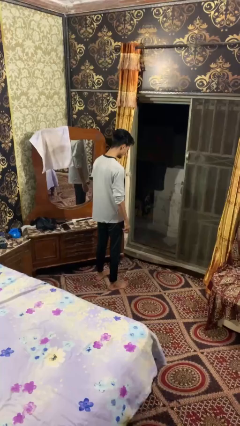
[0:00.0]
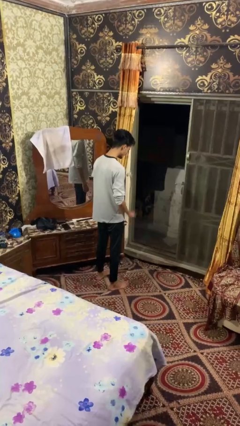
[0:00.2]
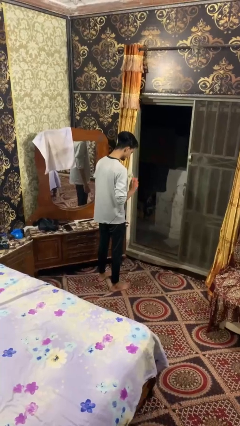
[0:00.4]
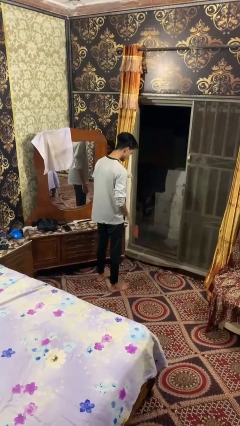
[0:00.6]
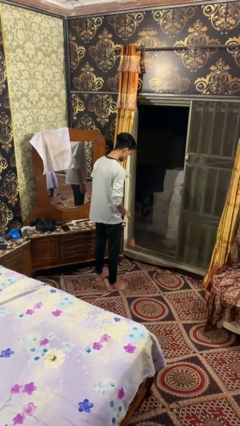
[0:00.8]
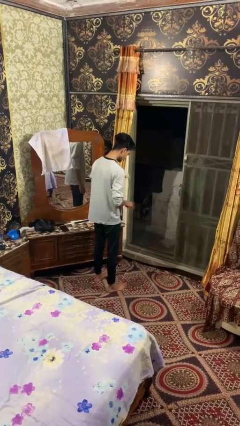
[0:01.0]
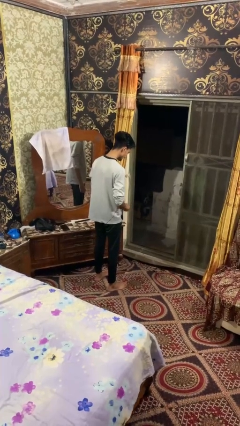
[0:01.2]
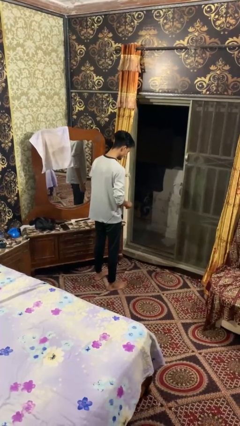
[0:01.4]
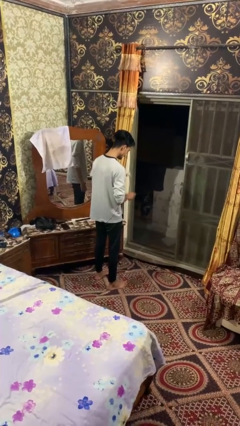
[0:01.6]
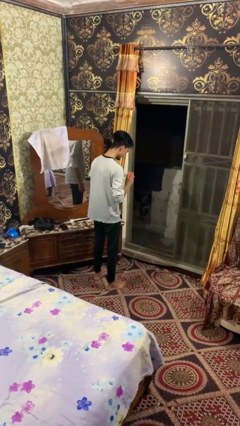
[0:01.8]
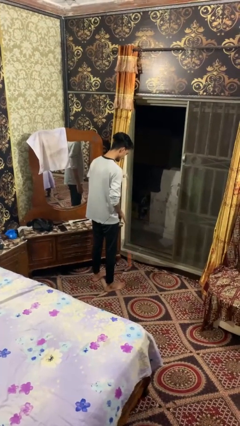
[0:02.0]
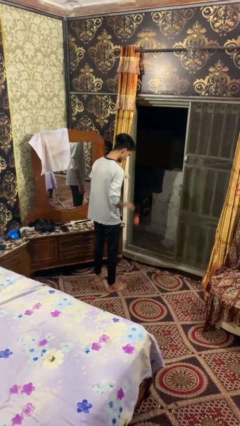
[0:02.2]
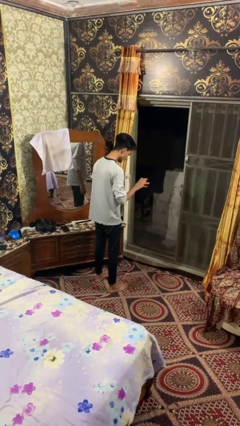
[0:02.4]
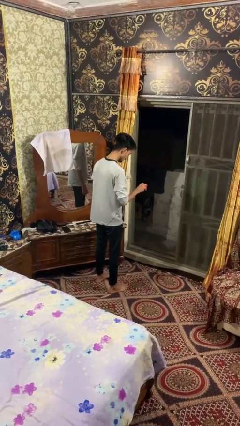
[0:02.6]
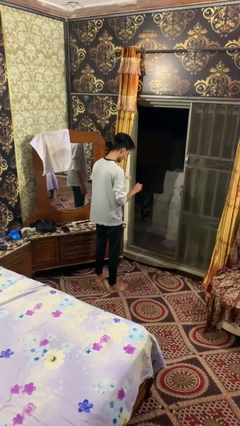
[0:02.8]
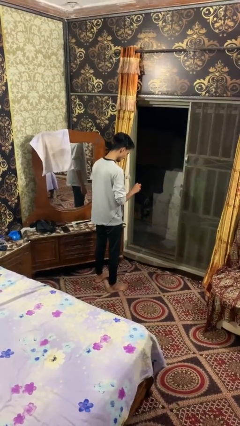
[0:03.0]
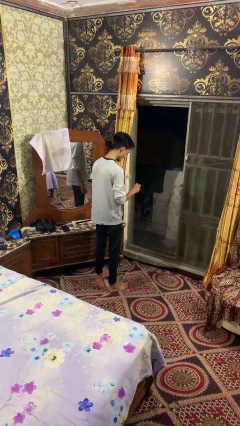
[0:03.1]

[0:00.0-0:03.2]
person bounces ball on floor

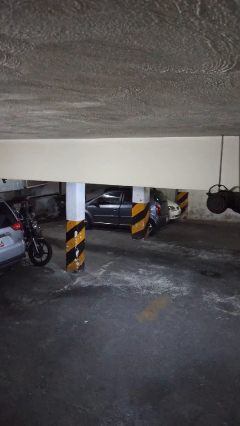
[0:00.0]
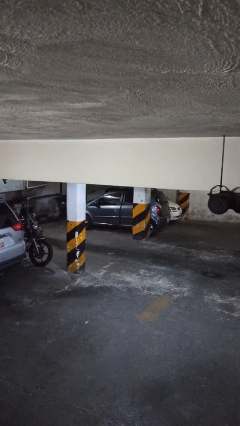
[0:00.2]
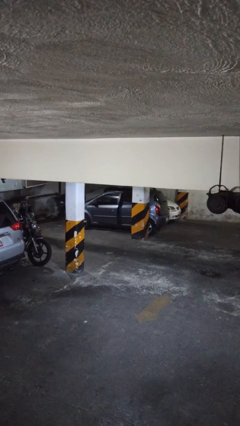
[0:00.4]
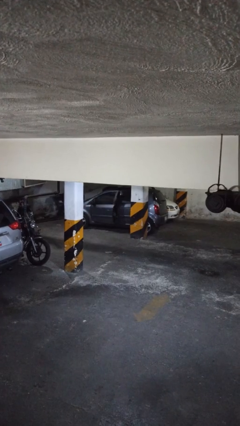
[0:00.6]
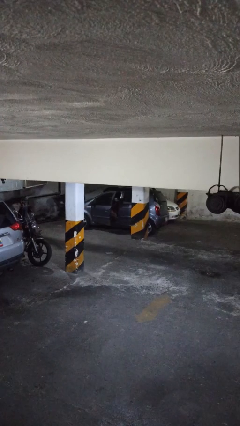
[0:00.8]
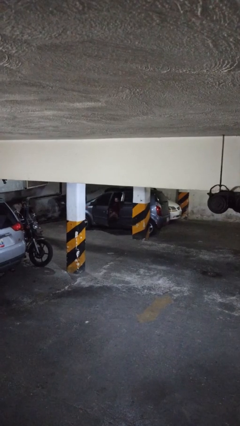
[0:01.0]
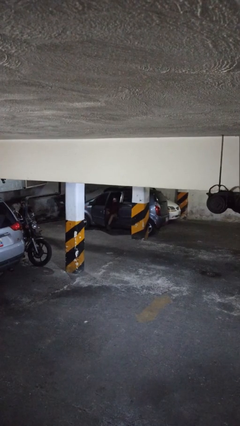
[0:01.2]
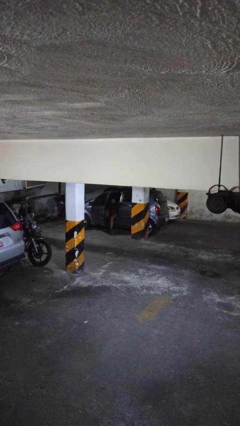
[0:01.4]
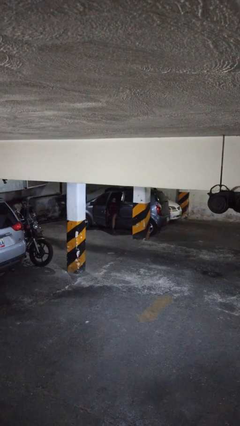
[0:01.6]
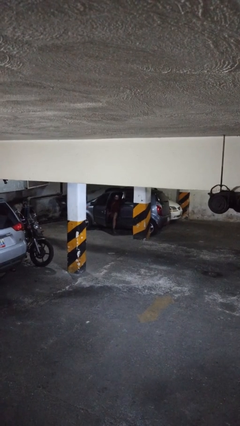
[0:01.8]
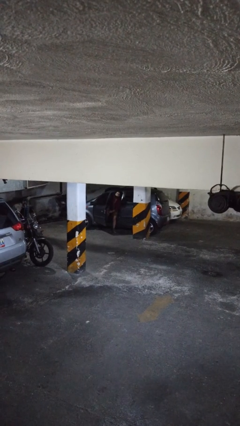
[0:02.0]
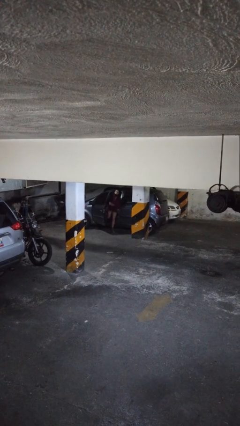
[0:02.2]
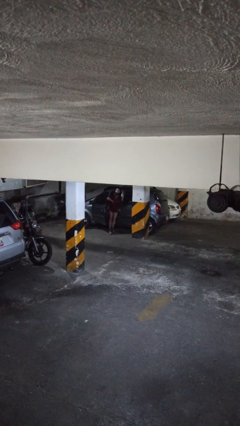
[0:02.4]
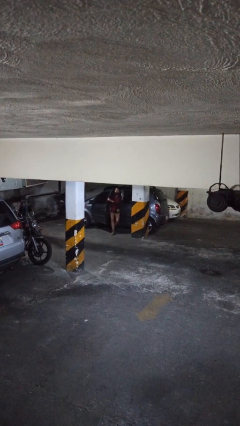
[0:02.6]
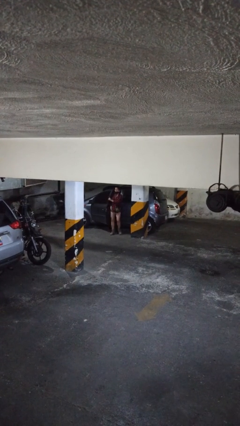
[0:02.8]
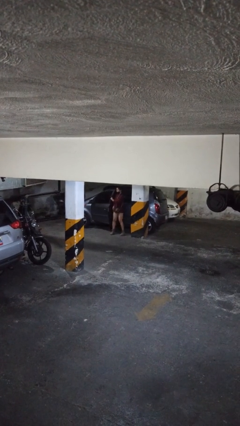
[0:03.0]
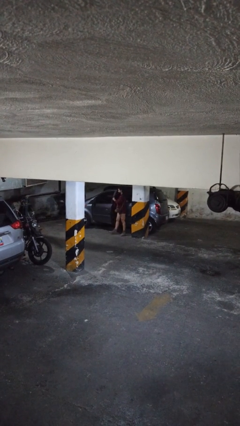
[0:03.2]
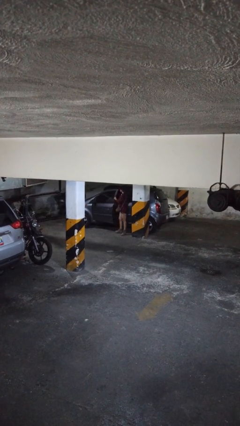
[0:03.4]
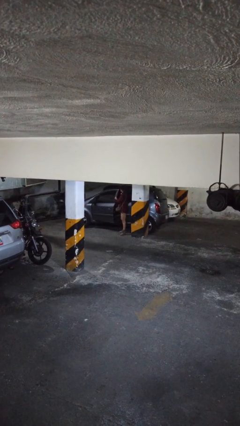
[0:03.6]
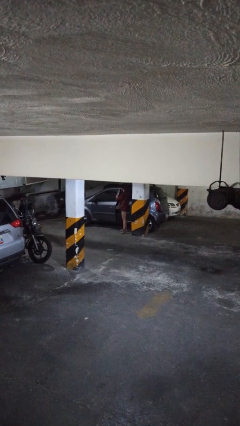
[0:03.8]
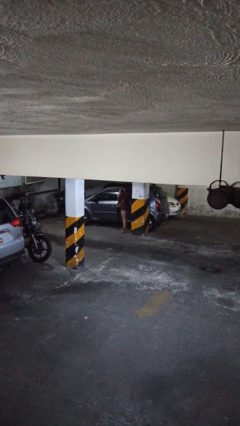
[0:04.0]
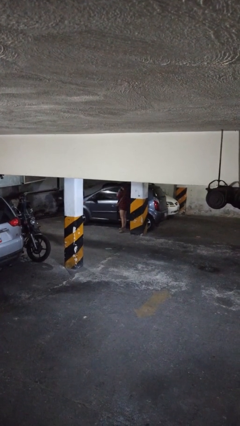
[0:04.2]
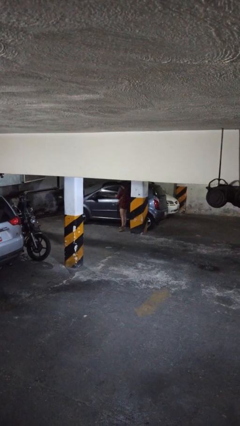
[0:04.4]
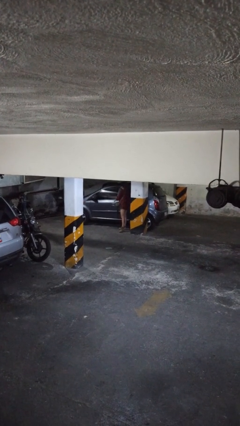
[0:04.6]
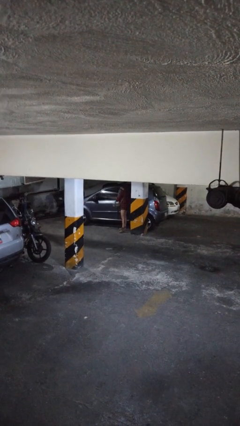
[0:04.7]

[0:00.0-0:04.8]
car drops off person

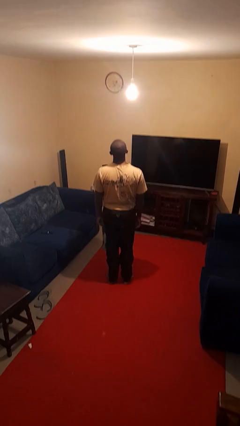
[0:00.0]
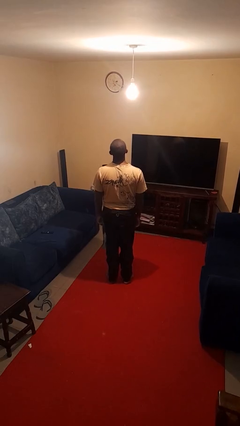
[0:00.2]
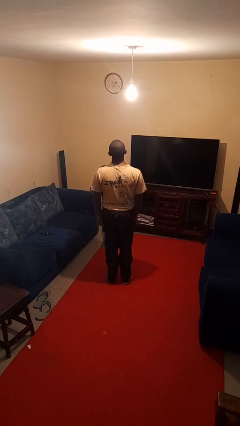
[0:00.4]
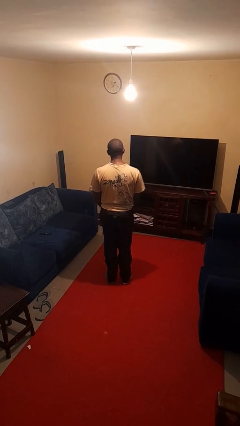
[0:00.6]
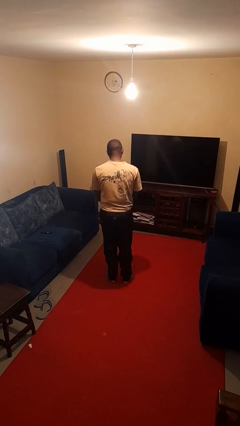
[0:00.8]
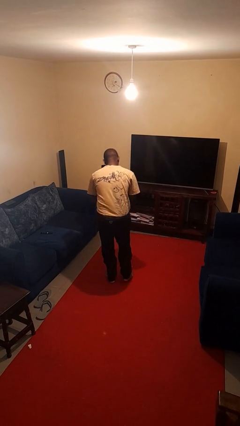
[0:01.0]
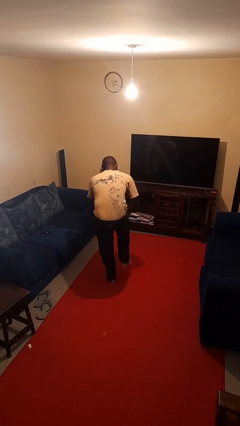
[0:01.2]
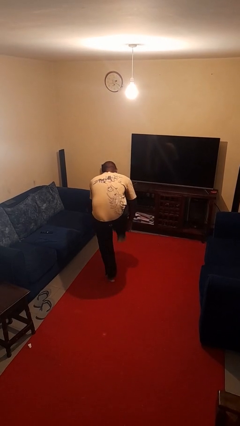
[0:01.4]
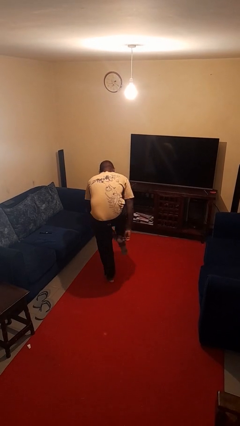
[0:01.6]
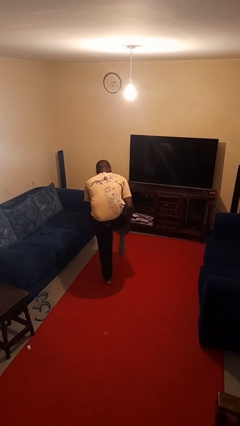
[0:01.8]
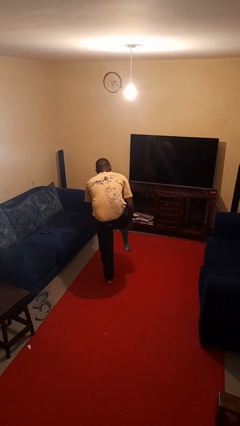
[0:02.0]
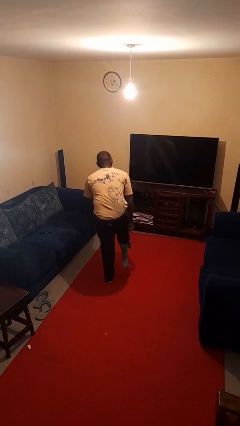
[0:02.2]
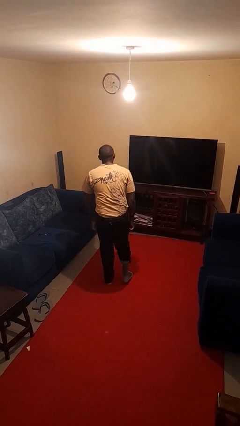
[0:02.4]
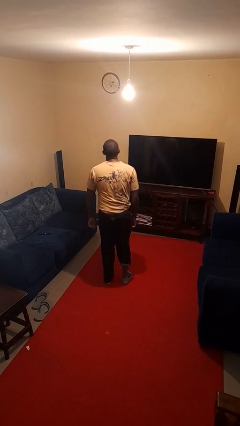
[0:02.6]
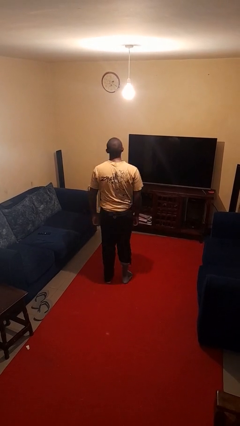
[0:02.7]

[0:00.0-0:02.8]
person puts on socks

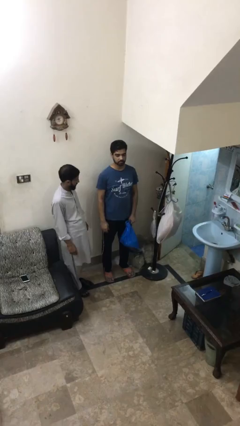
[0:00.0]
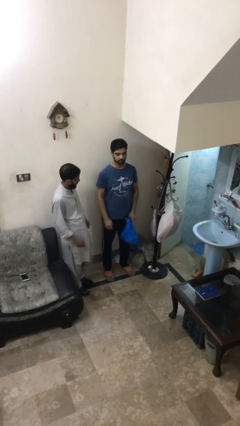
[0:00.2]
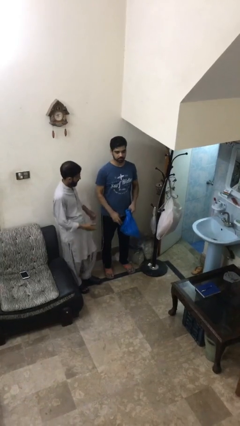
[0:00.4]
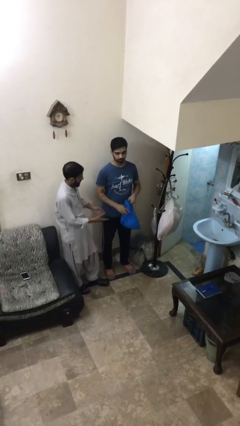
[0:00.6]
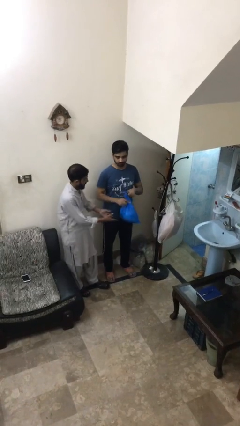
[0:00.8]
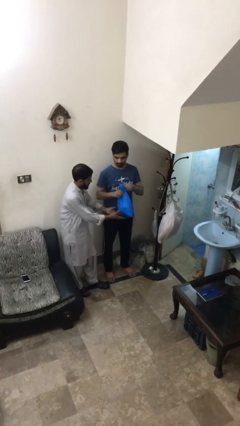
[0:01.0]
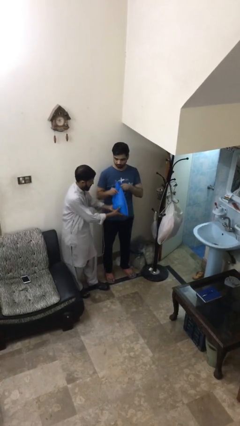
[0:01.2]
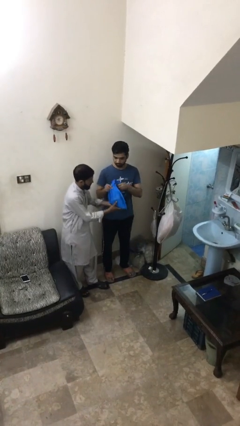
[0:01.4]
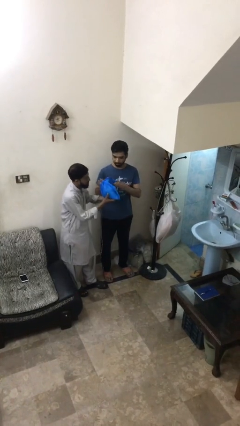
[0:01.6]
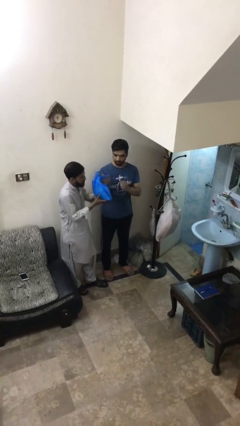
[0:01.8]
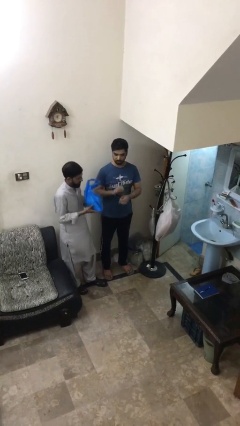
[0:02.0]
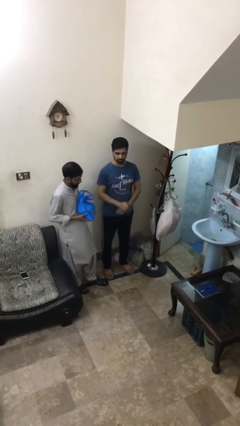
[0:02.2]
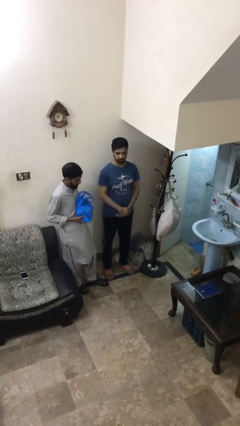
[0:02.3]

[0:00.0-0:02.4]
person transfers object to person

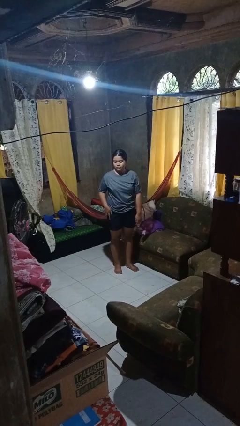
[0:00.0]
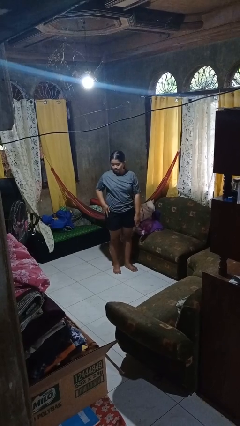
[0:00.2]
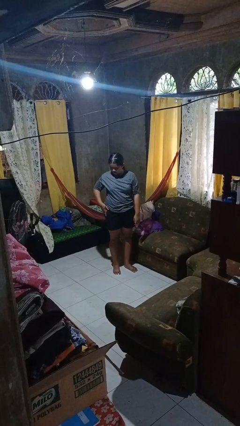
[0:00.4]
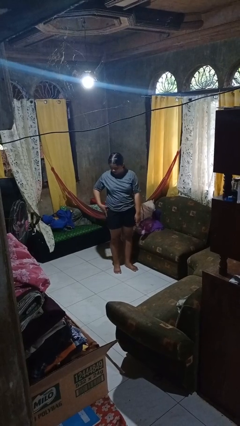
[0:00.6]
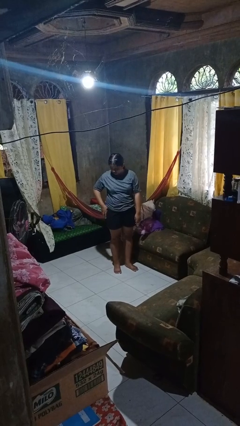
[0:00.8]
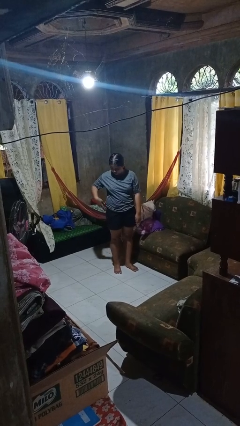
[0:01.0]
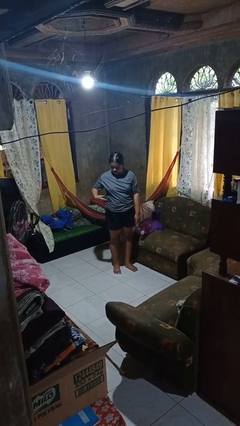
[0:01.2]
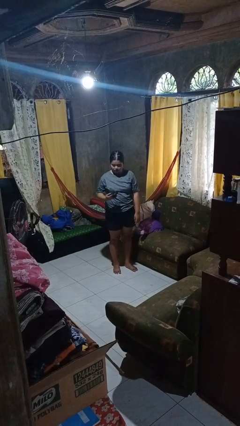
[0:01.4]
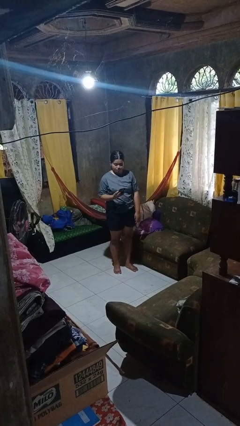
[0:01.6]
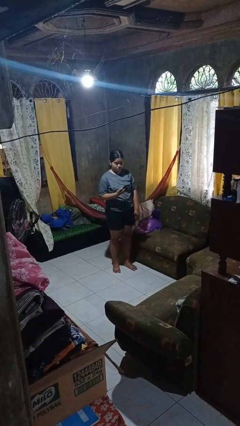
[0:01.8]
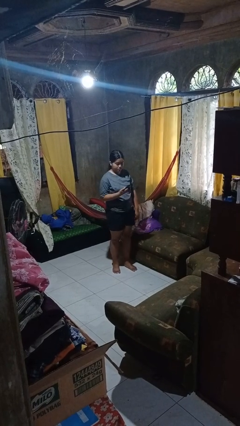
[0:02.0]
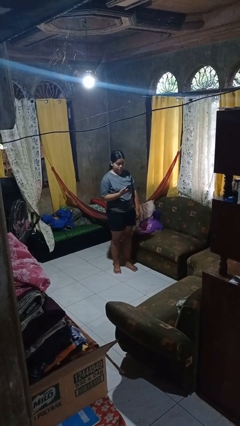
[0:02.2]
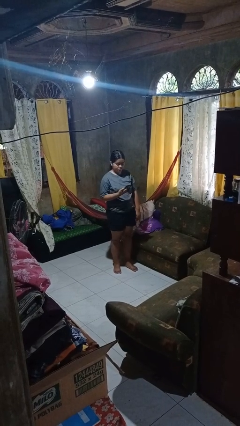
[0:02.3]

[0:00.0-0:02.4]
person takes phone from pocket

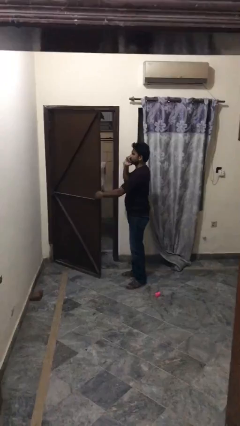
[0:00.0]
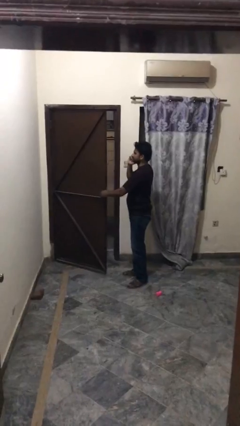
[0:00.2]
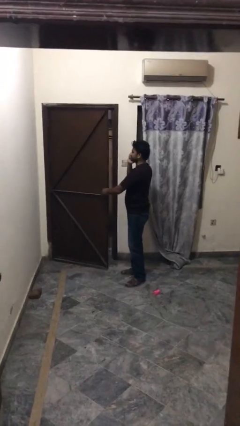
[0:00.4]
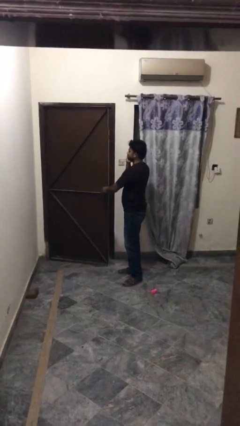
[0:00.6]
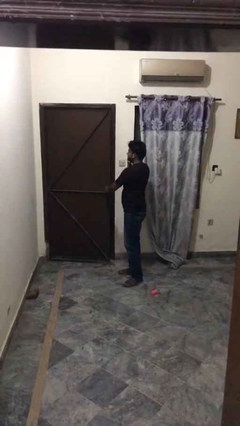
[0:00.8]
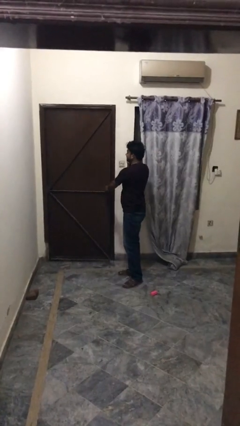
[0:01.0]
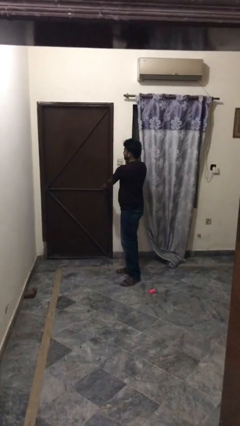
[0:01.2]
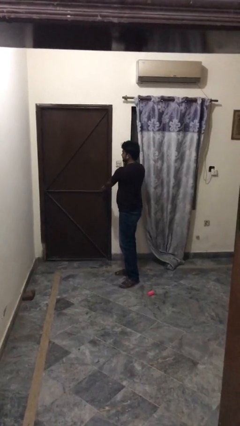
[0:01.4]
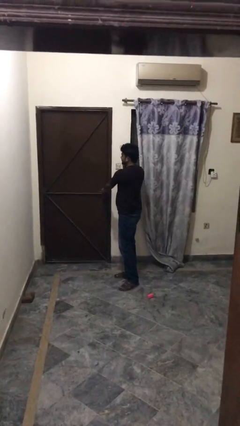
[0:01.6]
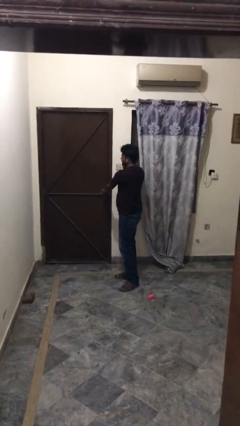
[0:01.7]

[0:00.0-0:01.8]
person closes facility door

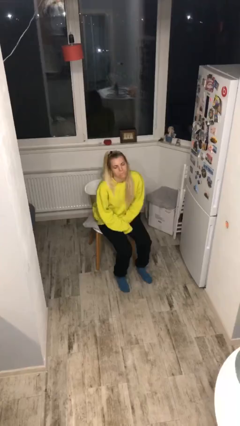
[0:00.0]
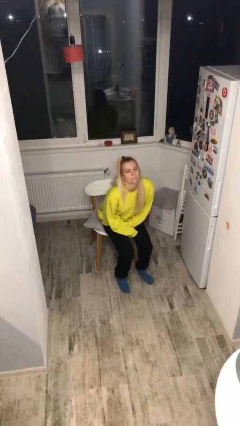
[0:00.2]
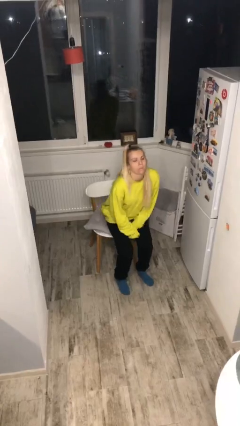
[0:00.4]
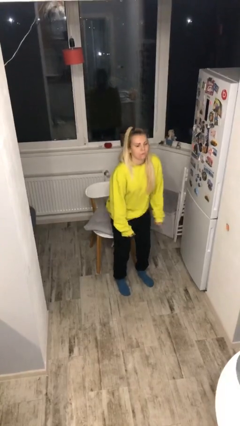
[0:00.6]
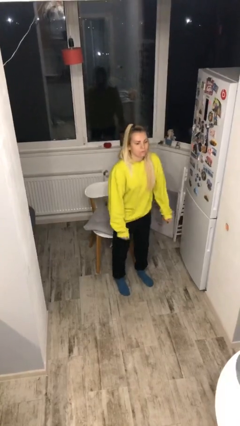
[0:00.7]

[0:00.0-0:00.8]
person stands up
